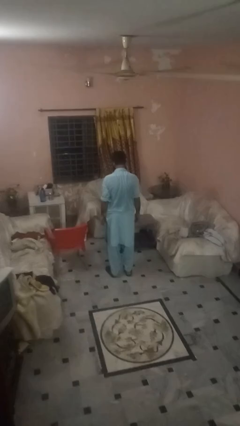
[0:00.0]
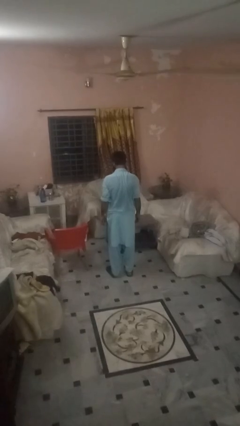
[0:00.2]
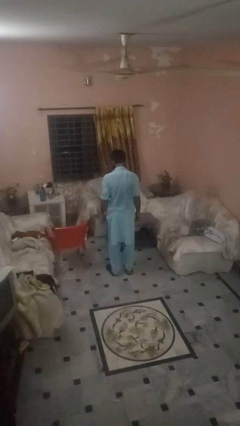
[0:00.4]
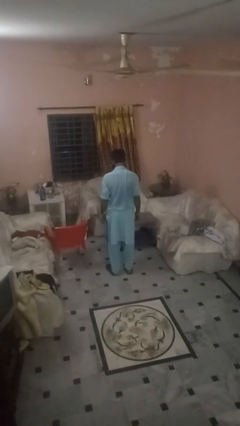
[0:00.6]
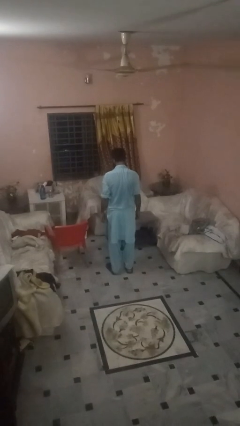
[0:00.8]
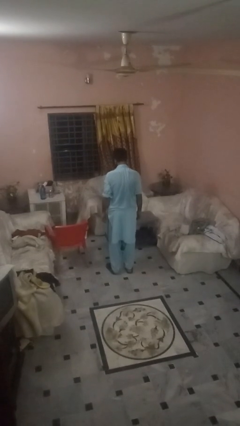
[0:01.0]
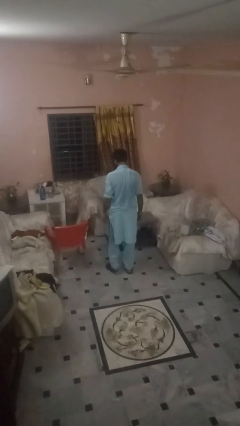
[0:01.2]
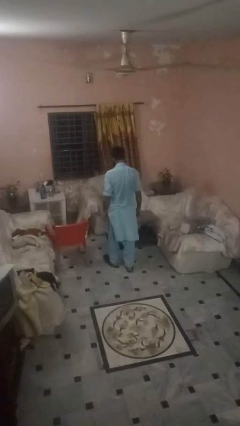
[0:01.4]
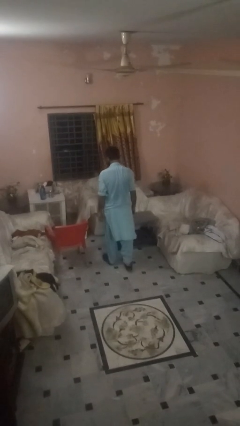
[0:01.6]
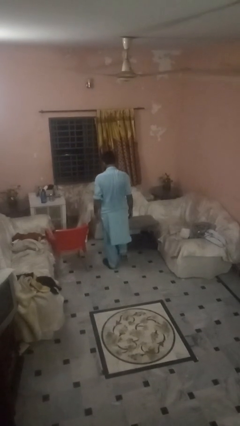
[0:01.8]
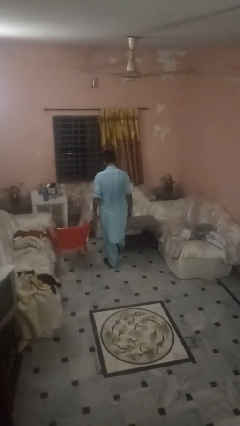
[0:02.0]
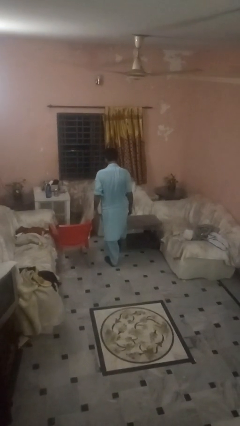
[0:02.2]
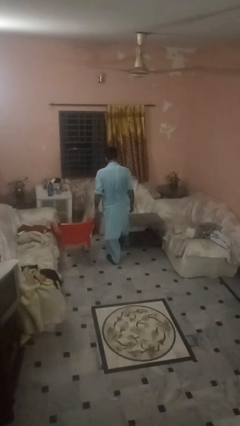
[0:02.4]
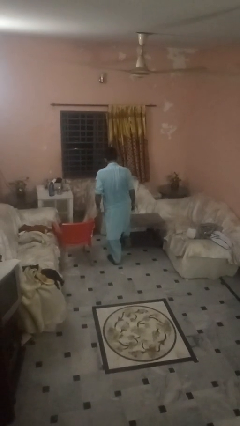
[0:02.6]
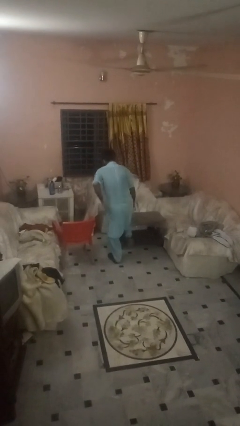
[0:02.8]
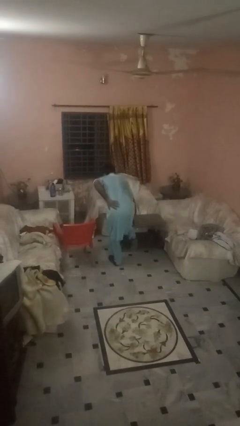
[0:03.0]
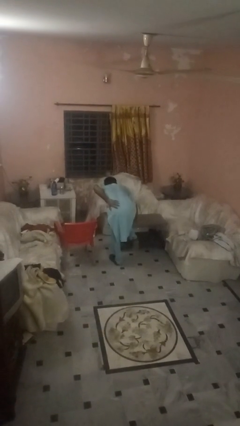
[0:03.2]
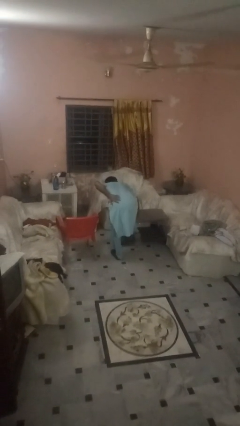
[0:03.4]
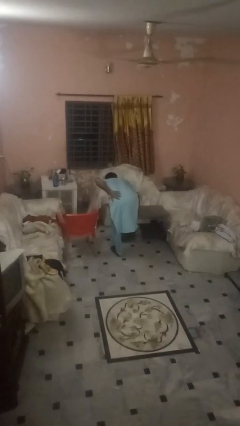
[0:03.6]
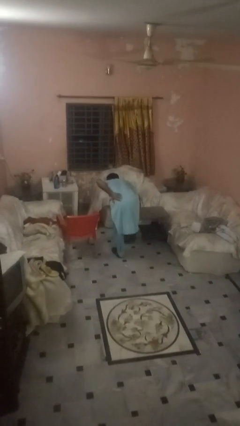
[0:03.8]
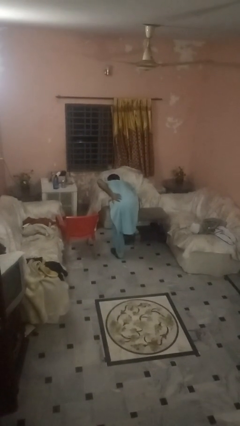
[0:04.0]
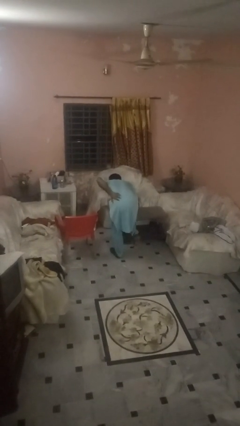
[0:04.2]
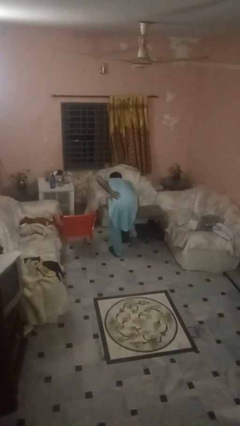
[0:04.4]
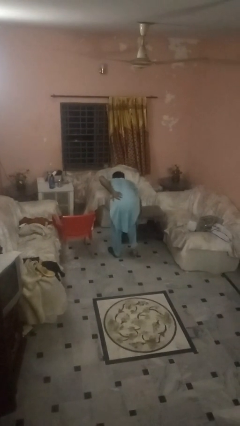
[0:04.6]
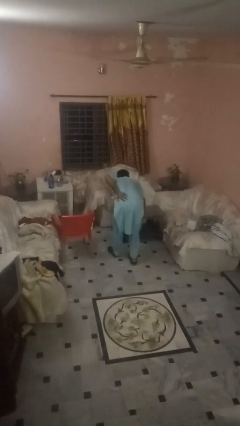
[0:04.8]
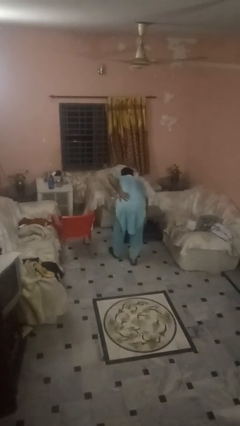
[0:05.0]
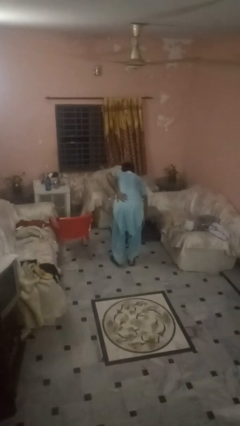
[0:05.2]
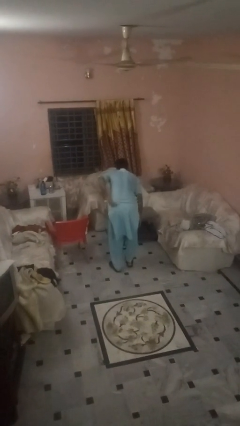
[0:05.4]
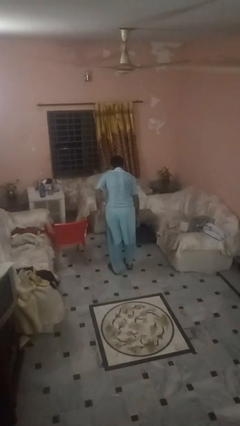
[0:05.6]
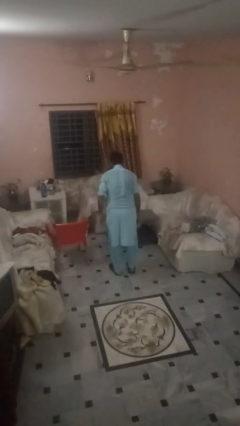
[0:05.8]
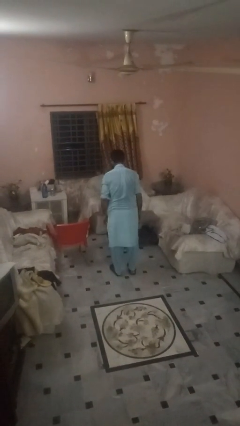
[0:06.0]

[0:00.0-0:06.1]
person bumps into table

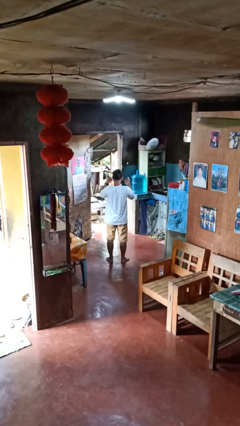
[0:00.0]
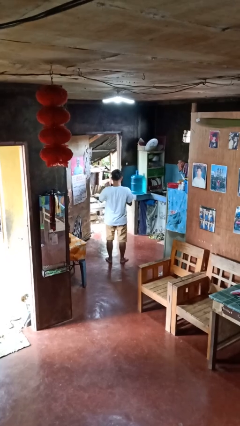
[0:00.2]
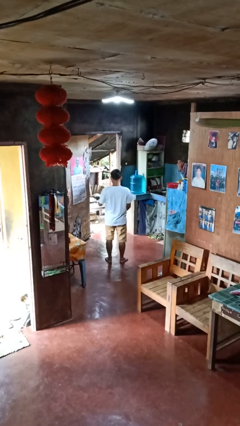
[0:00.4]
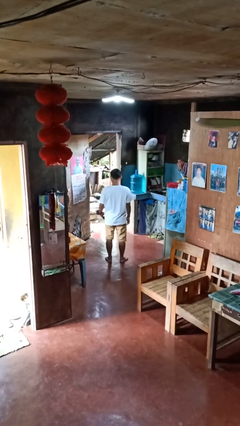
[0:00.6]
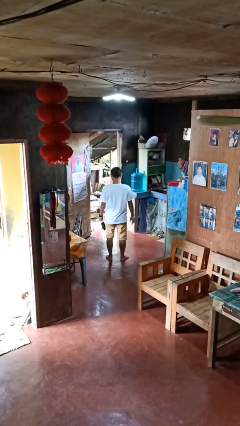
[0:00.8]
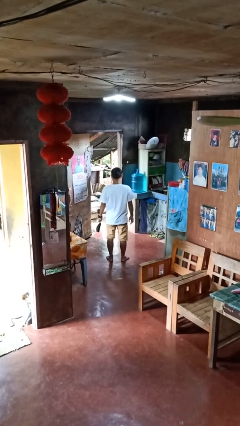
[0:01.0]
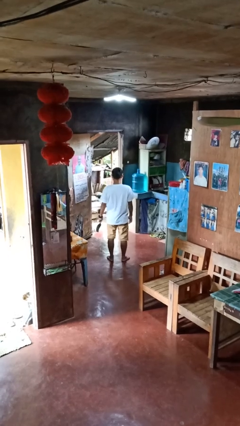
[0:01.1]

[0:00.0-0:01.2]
person takes off facemask

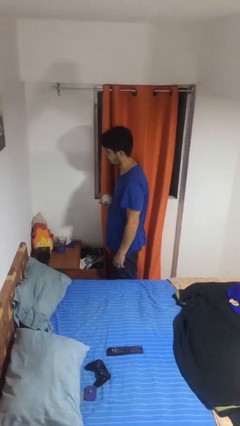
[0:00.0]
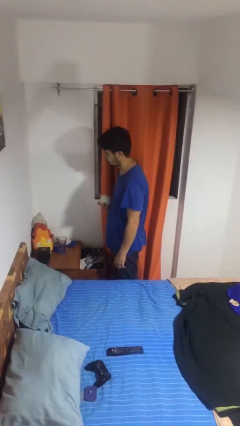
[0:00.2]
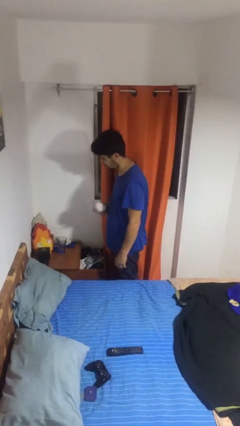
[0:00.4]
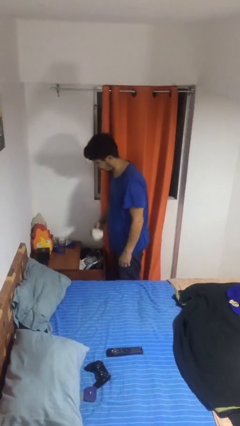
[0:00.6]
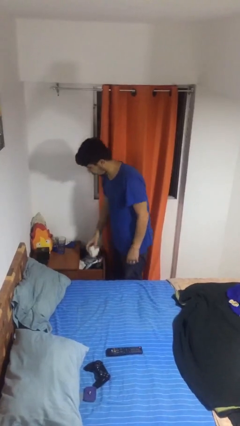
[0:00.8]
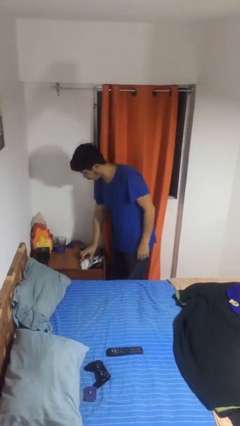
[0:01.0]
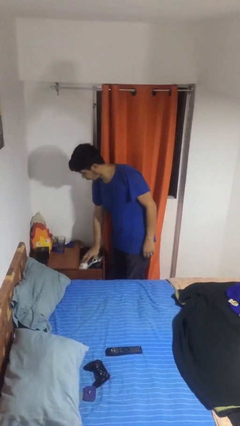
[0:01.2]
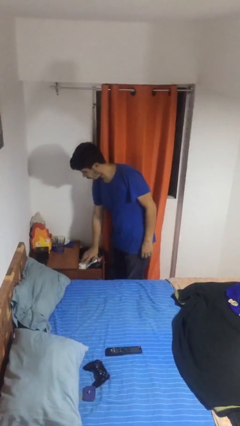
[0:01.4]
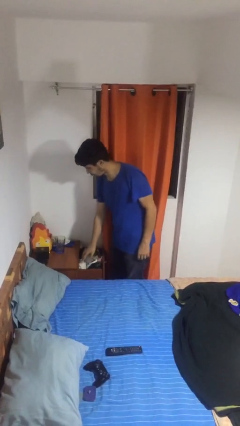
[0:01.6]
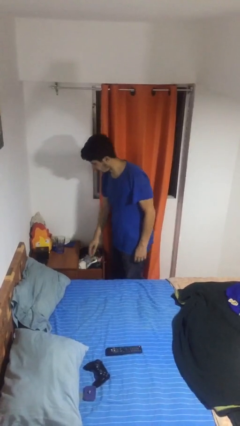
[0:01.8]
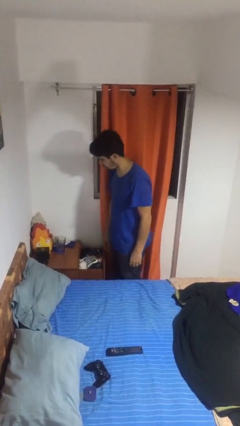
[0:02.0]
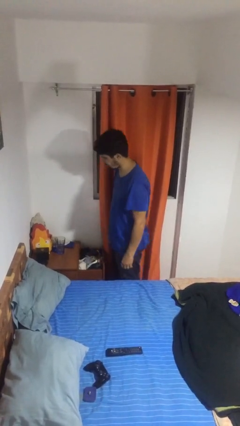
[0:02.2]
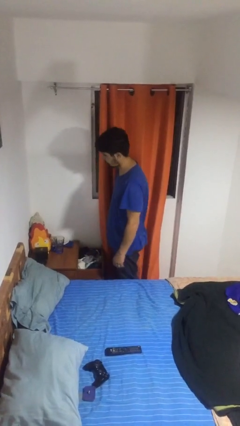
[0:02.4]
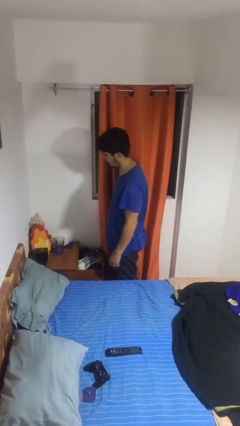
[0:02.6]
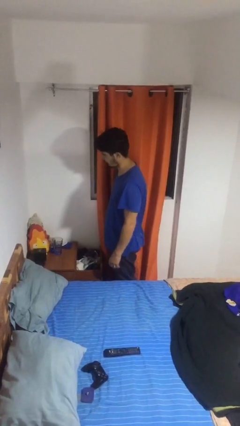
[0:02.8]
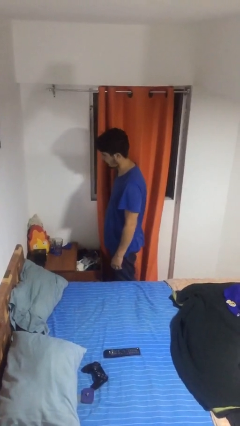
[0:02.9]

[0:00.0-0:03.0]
person puts clothes into dresser

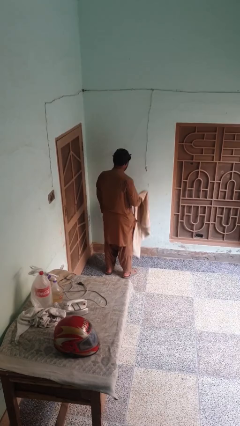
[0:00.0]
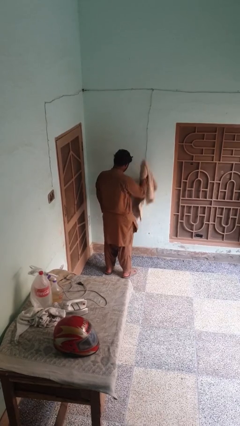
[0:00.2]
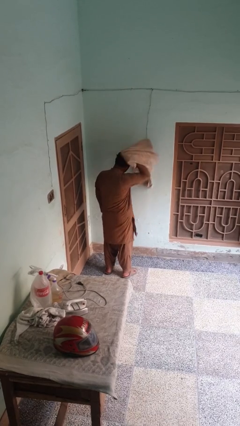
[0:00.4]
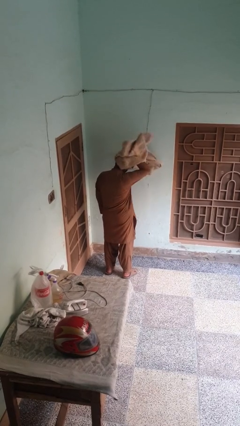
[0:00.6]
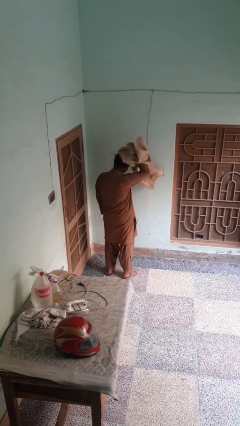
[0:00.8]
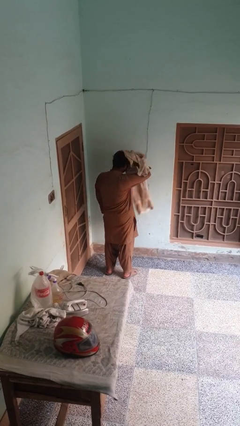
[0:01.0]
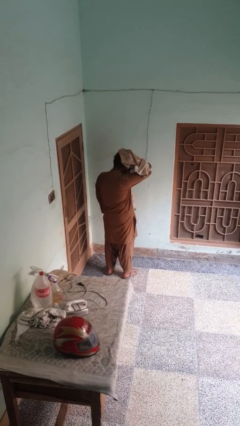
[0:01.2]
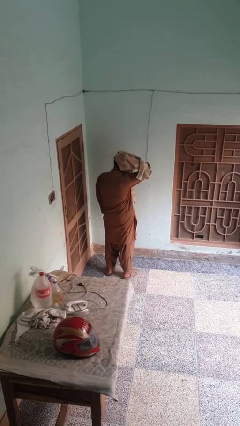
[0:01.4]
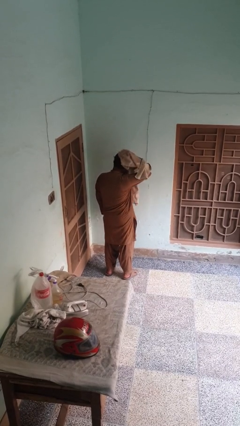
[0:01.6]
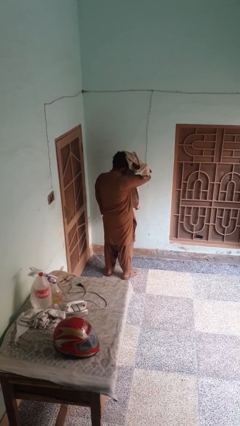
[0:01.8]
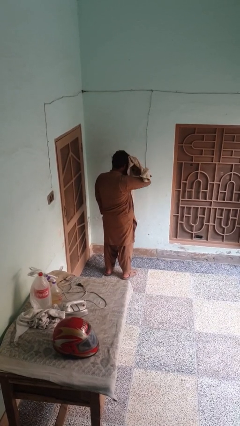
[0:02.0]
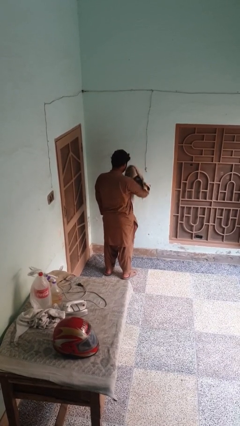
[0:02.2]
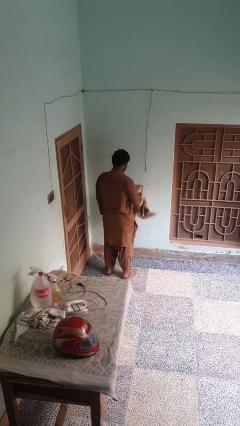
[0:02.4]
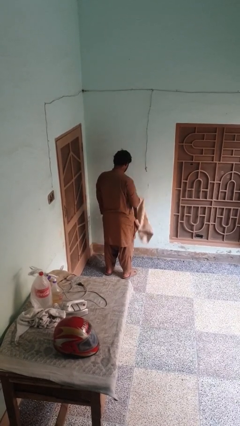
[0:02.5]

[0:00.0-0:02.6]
person dries hair with towel

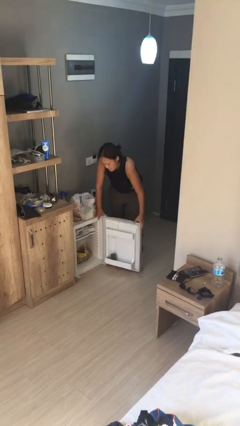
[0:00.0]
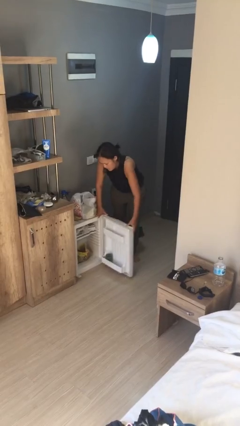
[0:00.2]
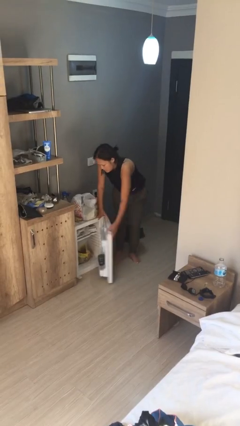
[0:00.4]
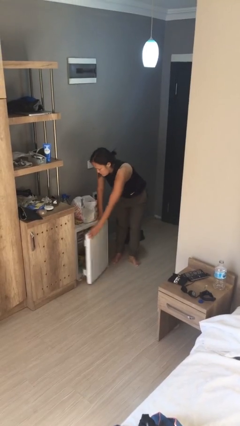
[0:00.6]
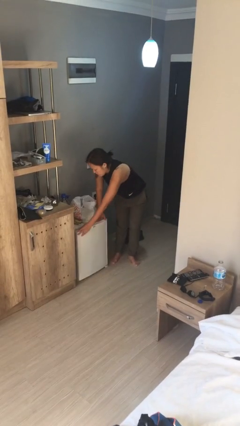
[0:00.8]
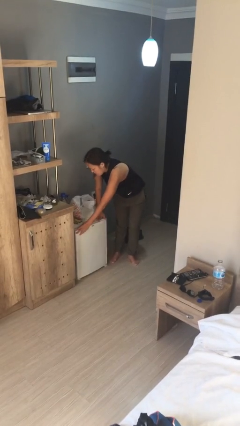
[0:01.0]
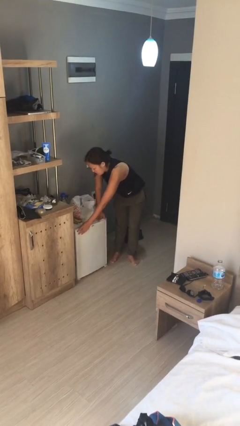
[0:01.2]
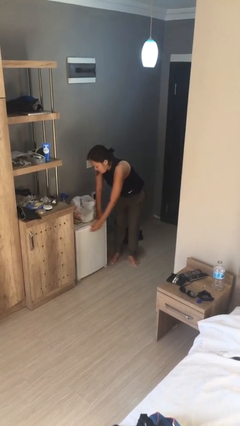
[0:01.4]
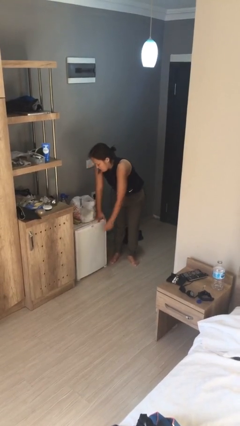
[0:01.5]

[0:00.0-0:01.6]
person closes refrigerator

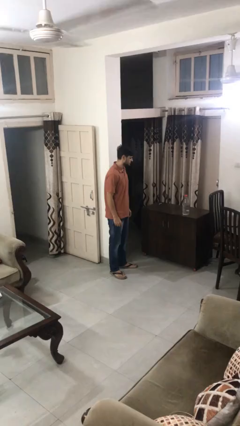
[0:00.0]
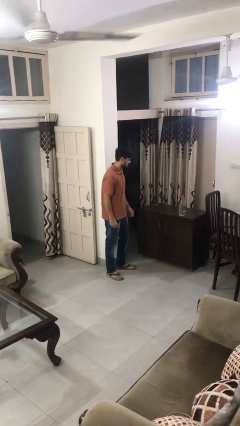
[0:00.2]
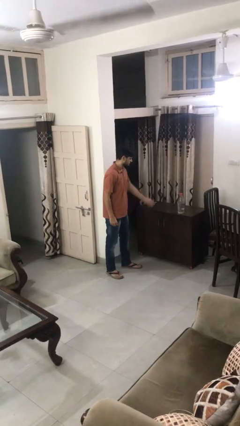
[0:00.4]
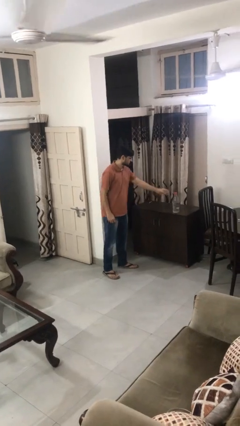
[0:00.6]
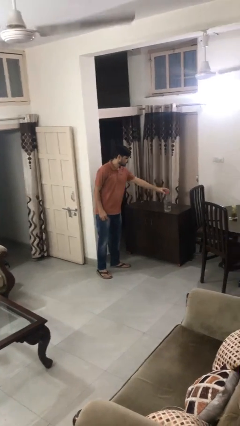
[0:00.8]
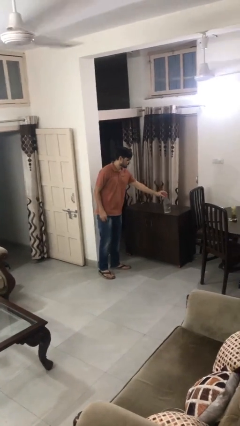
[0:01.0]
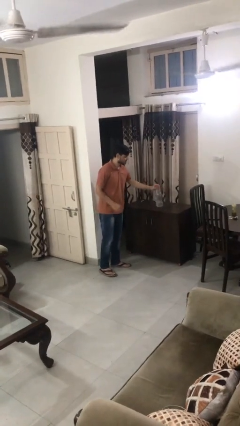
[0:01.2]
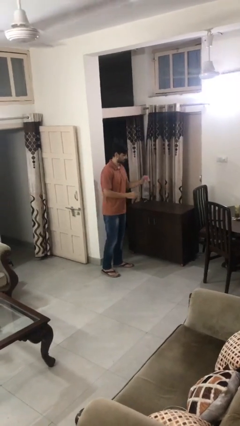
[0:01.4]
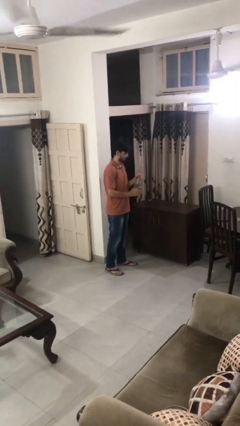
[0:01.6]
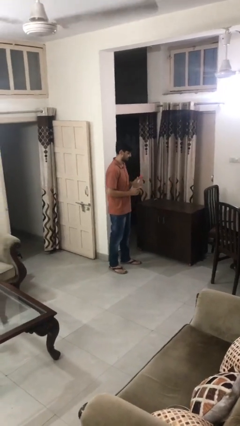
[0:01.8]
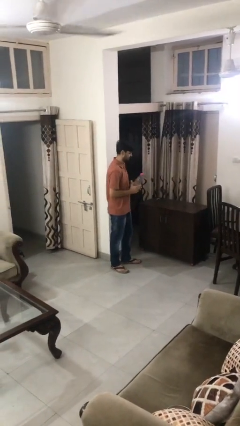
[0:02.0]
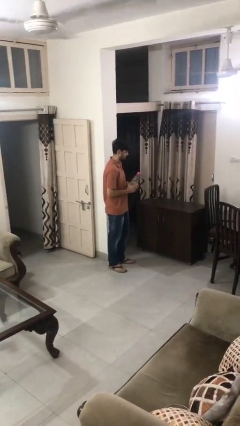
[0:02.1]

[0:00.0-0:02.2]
person picks up object from countertop

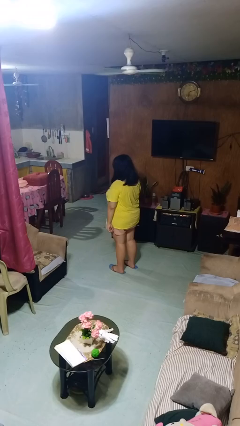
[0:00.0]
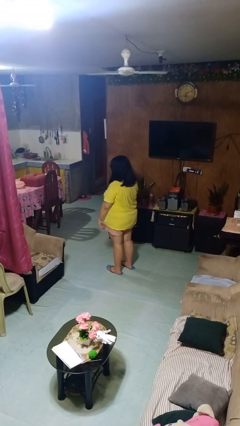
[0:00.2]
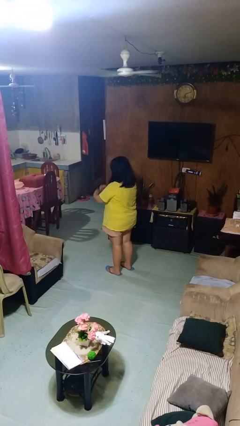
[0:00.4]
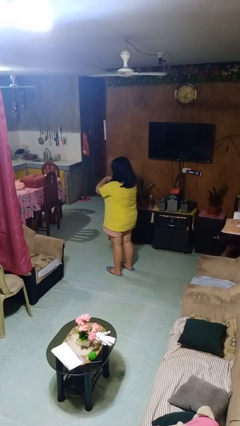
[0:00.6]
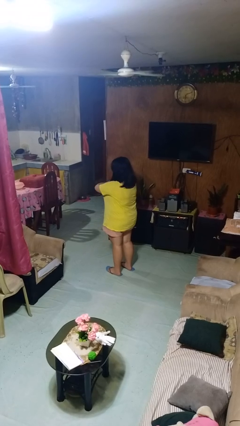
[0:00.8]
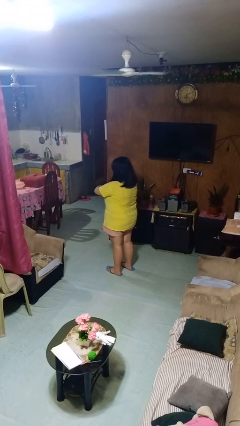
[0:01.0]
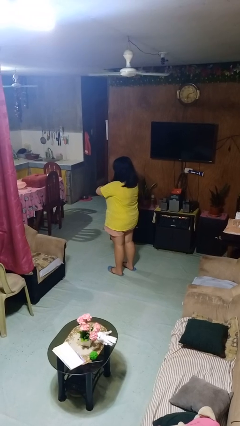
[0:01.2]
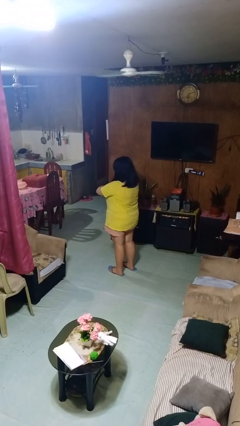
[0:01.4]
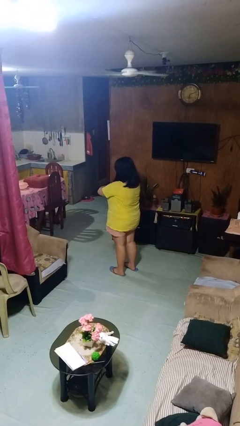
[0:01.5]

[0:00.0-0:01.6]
person crosses arms
